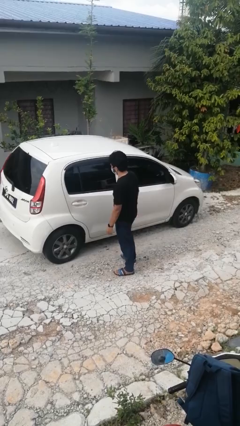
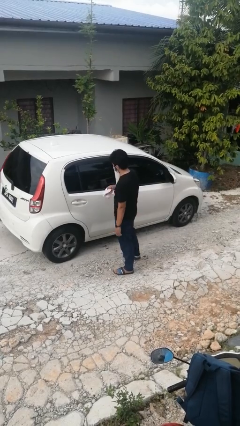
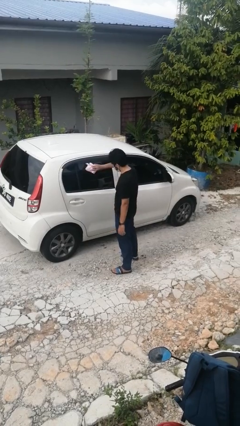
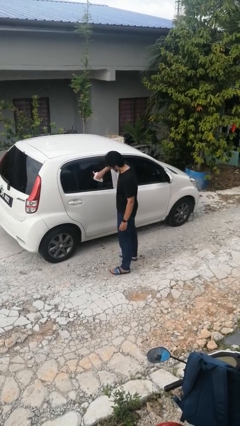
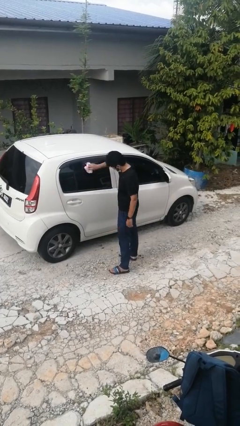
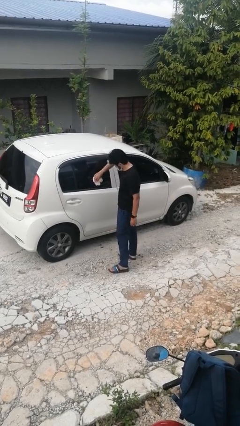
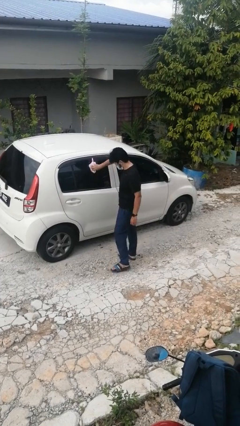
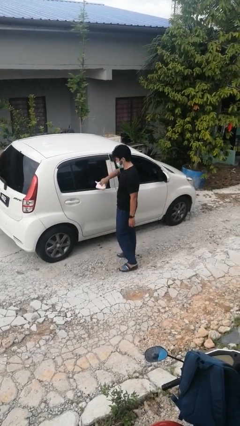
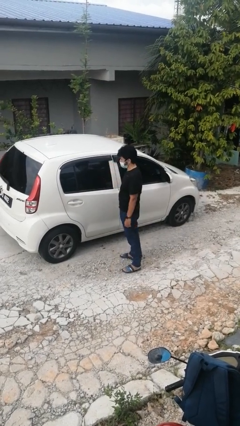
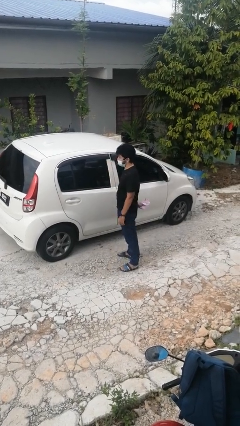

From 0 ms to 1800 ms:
person polishes car with rag

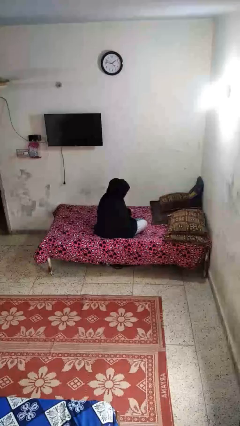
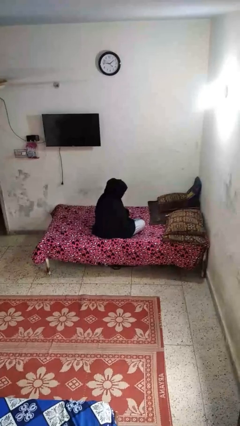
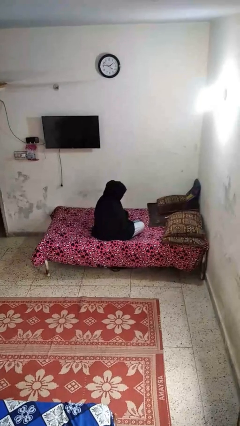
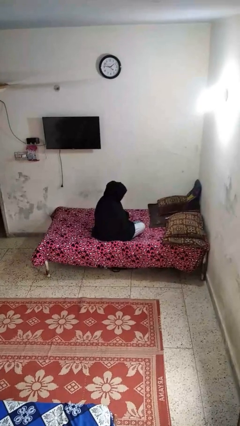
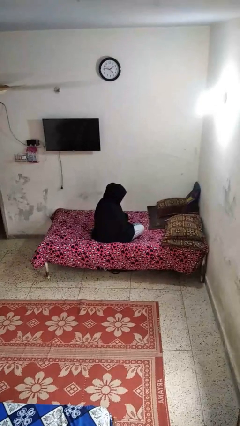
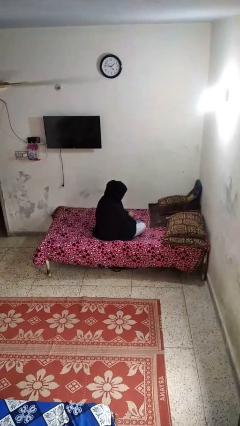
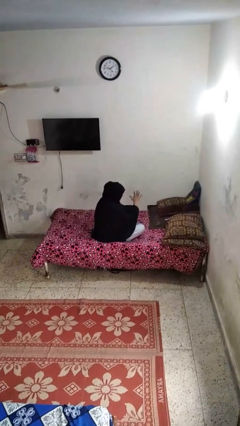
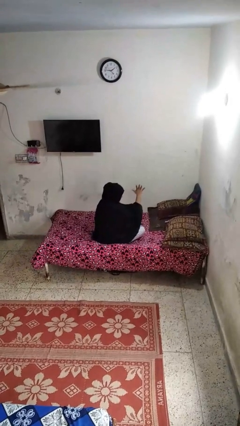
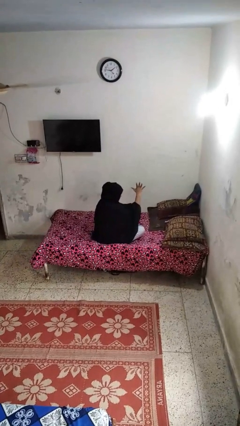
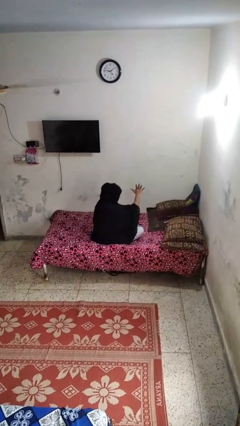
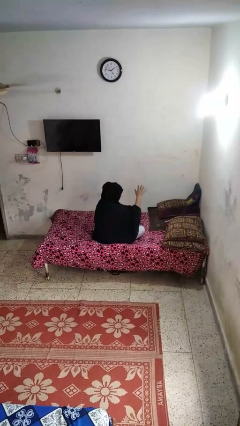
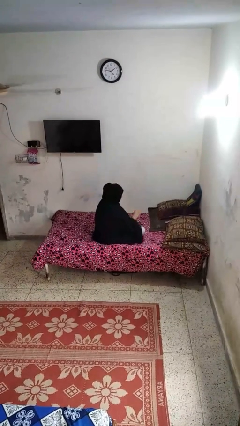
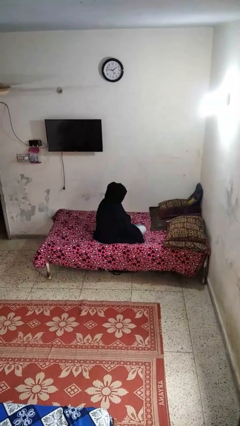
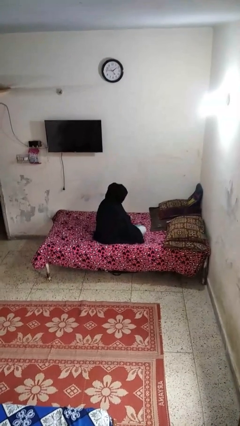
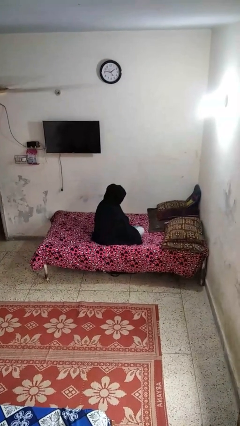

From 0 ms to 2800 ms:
person gestures number five

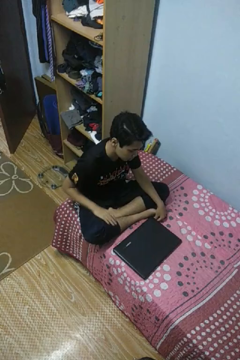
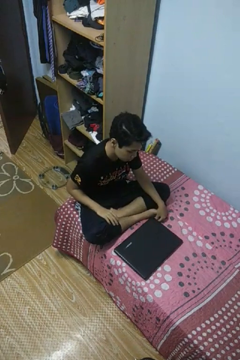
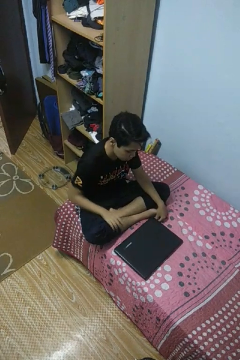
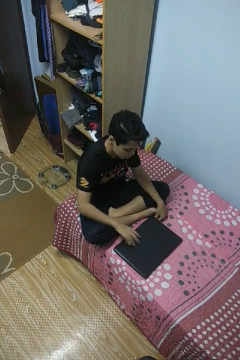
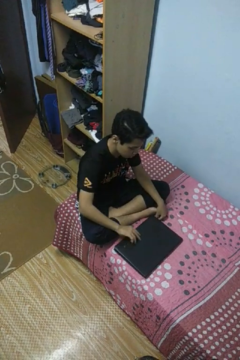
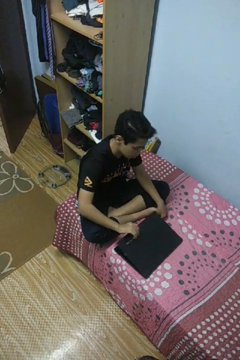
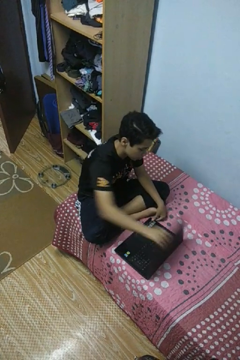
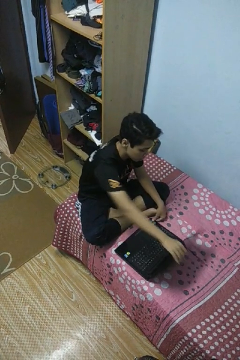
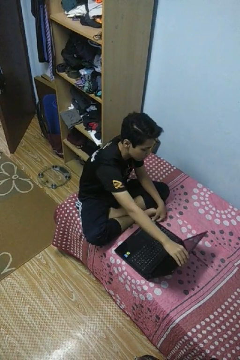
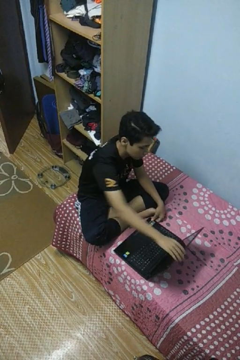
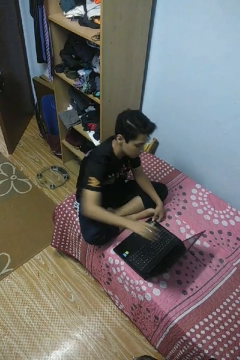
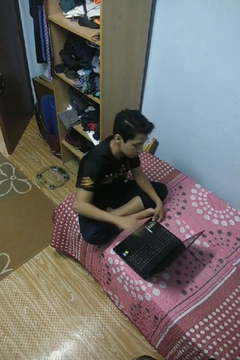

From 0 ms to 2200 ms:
person opens laptop

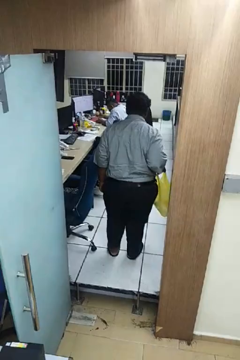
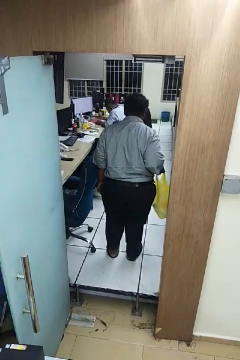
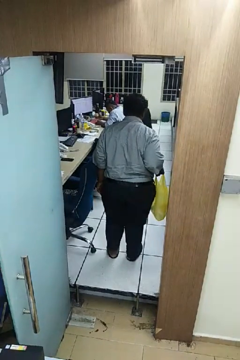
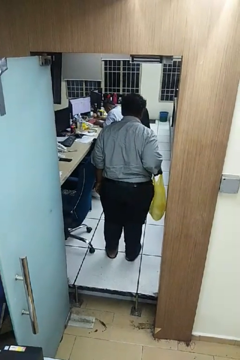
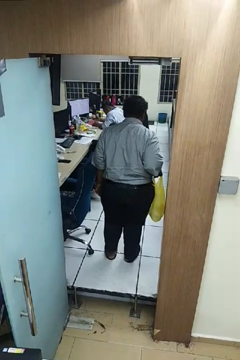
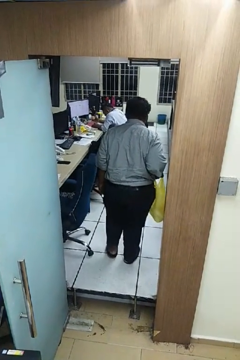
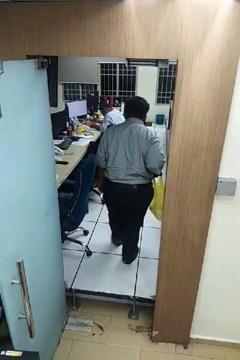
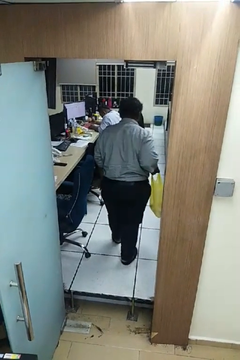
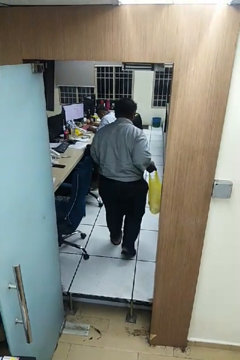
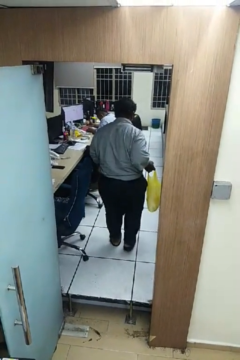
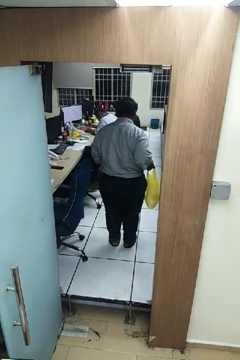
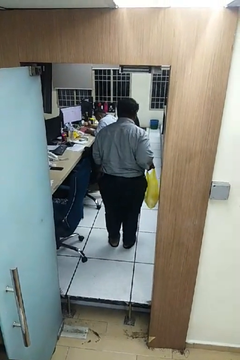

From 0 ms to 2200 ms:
person carries groceries

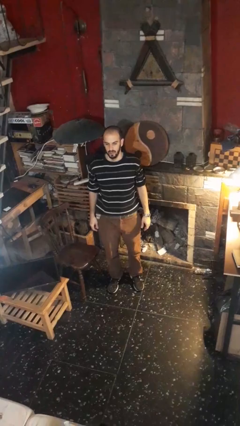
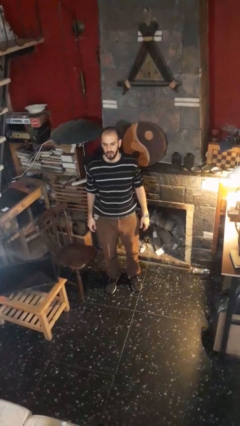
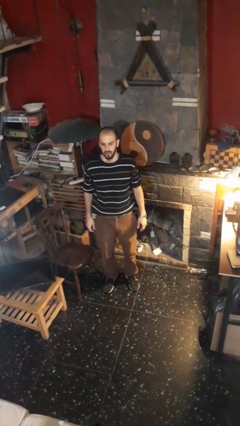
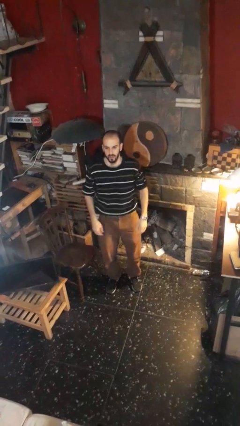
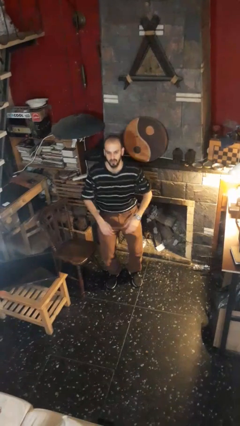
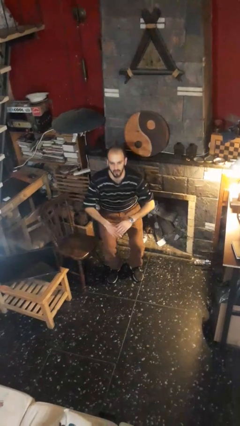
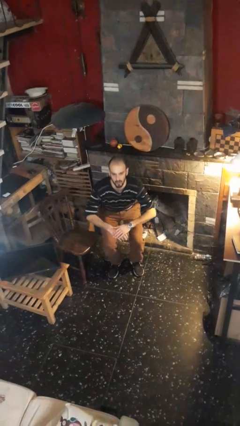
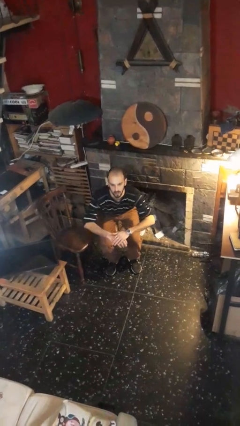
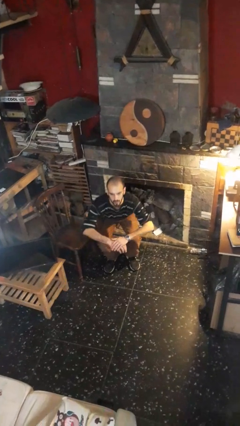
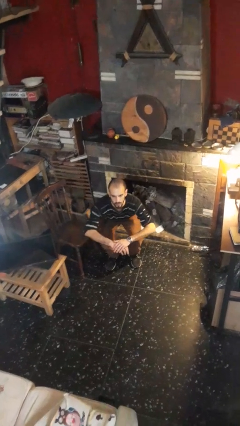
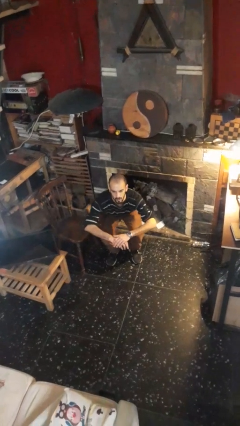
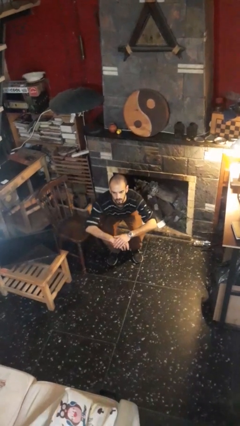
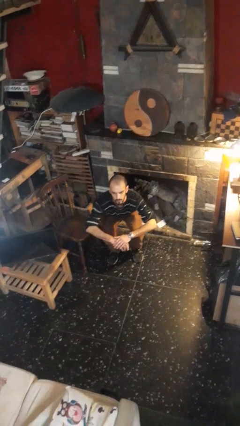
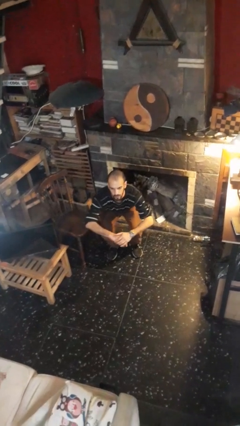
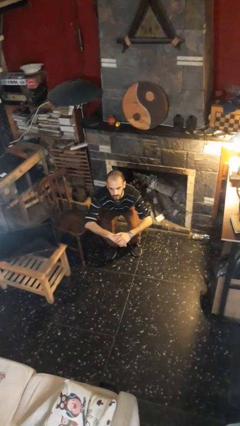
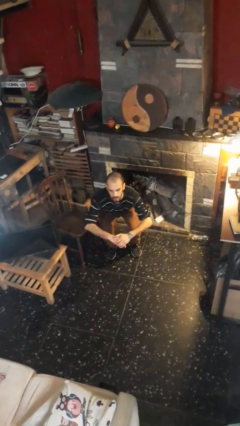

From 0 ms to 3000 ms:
person squats

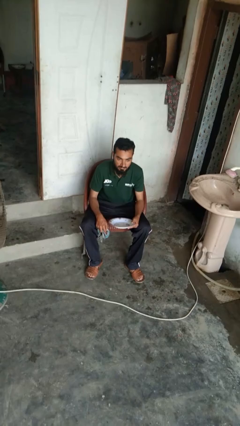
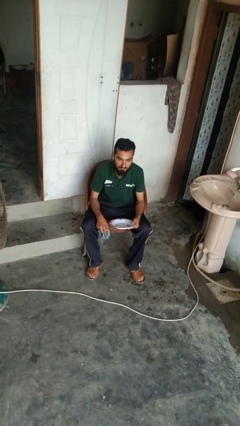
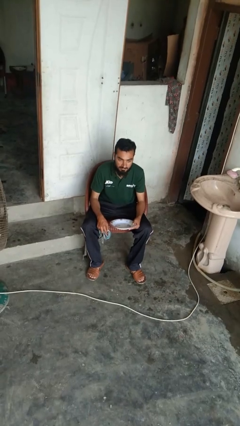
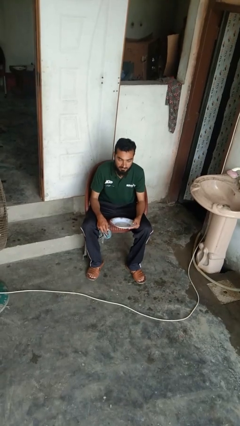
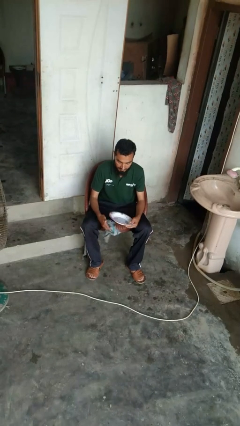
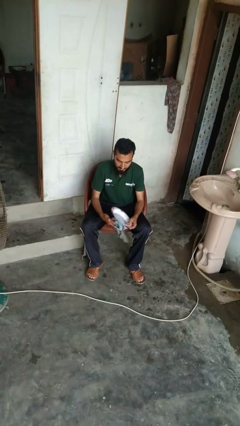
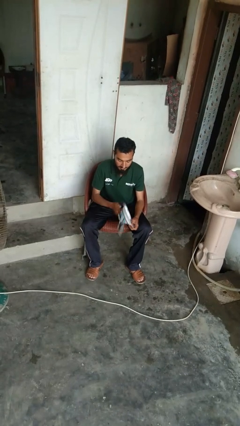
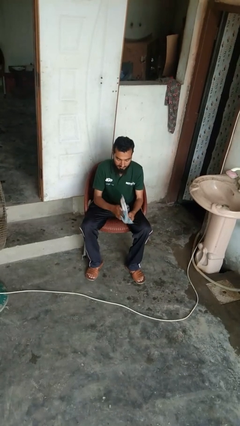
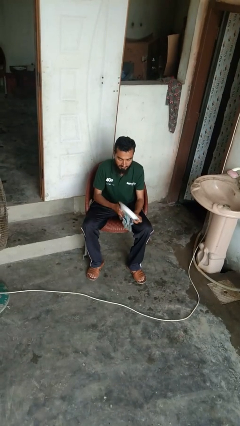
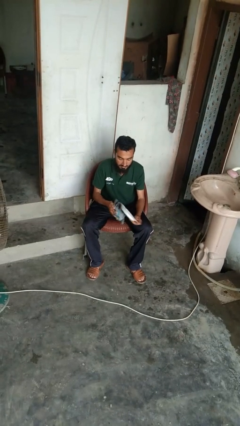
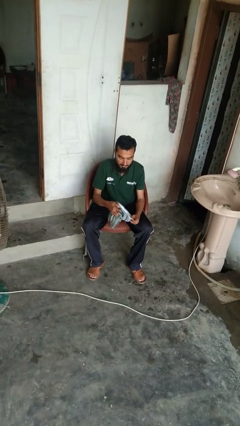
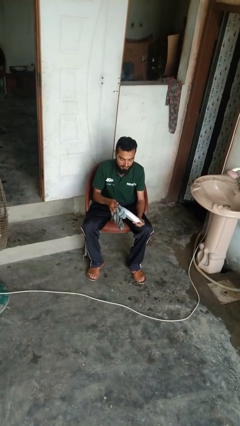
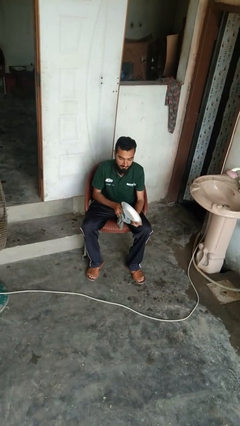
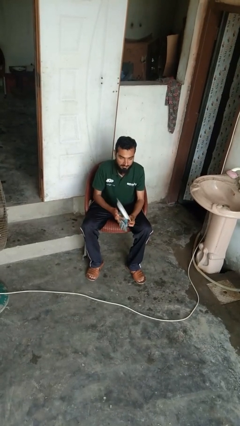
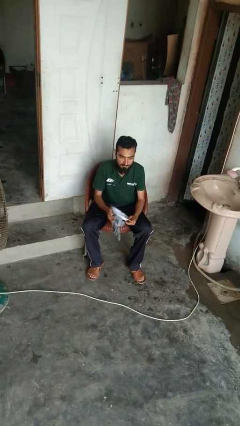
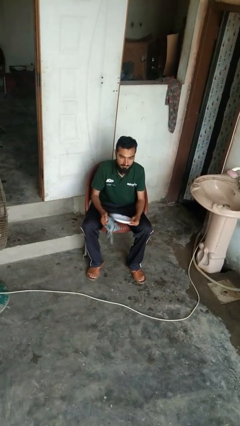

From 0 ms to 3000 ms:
person dries dish

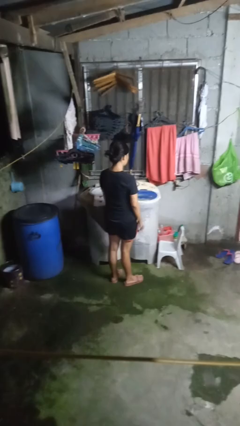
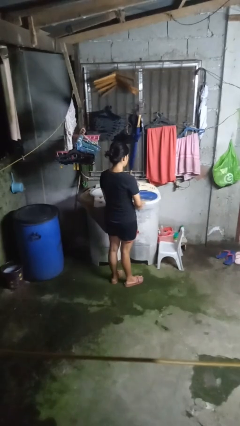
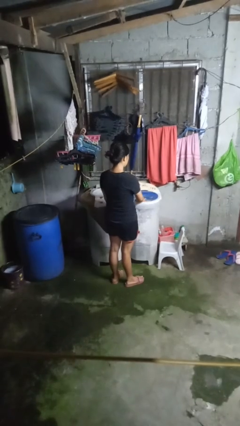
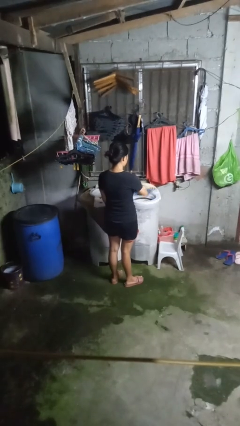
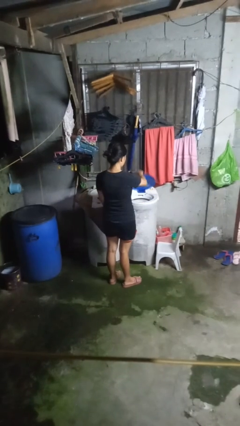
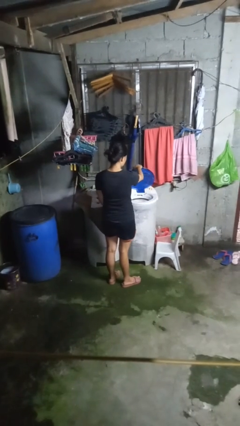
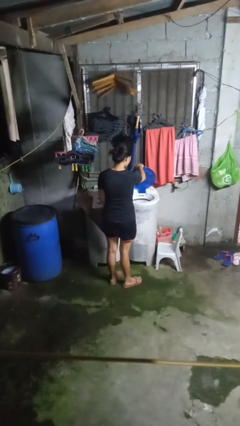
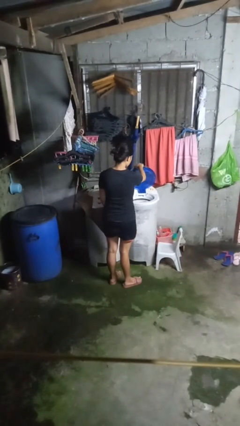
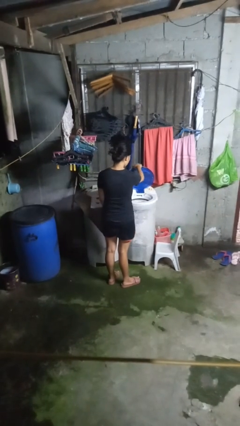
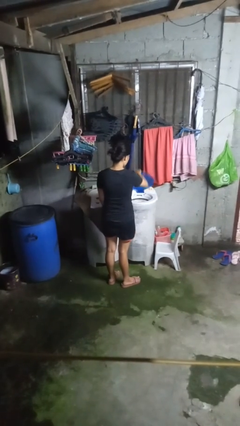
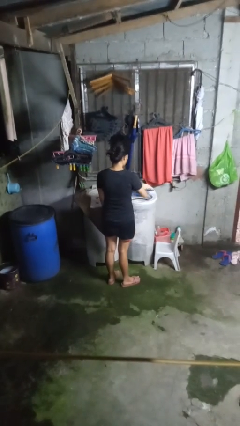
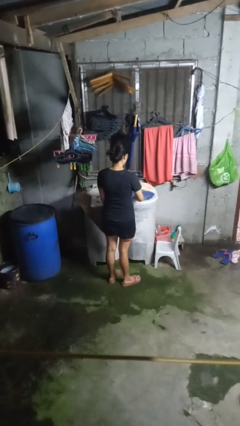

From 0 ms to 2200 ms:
person opens clothes washer

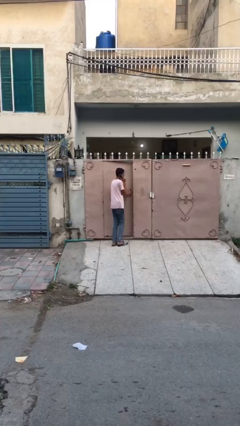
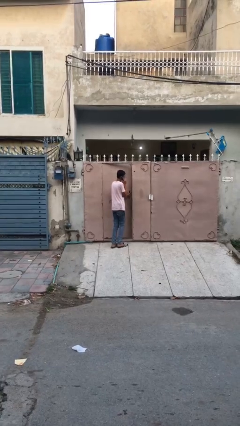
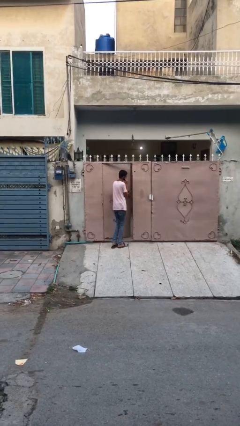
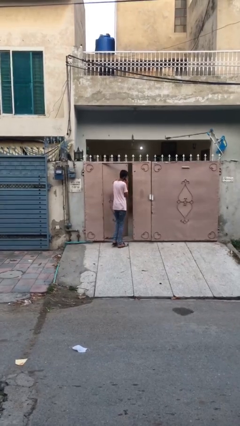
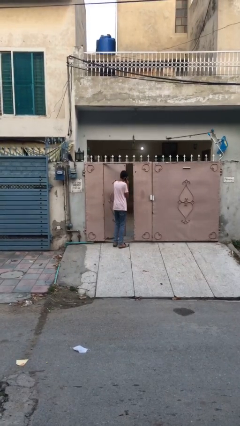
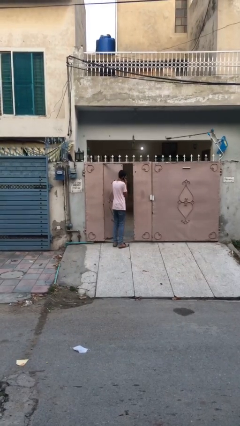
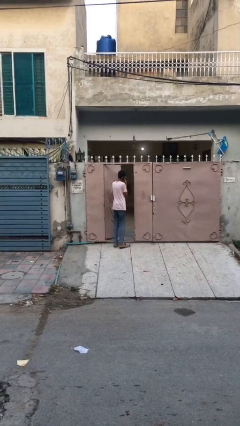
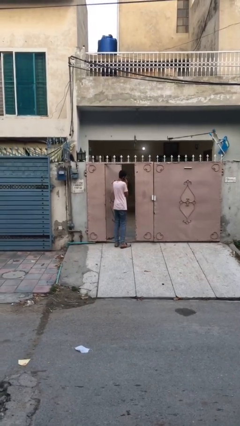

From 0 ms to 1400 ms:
person opens facility door
